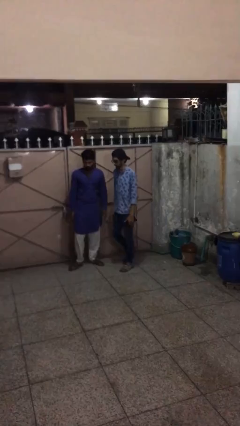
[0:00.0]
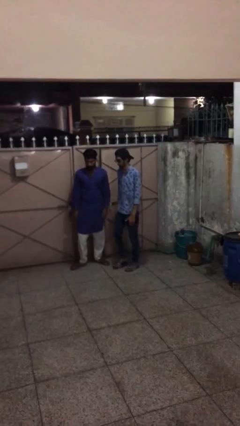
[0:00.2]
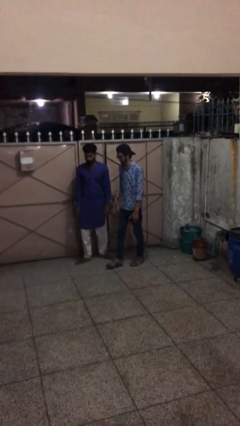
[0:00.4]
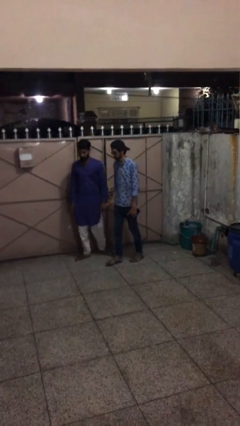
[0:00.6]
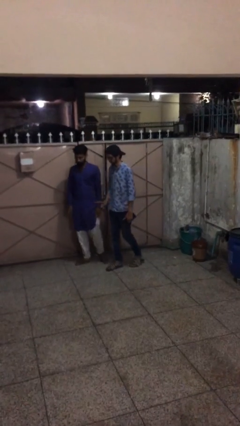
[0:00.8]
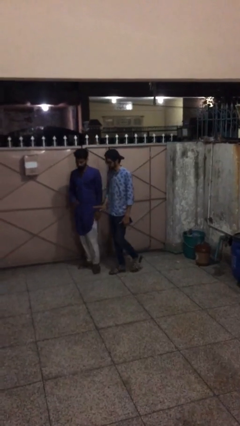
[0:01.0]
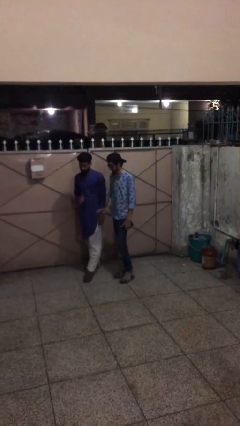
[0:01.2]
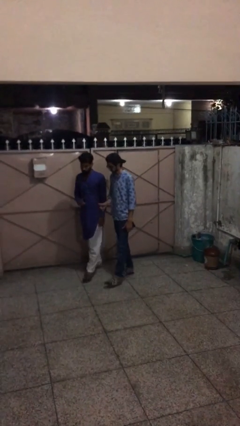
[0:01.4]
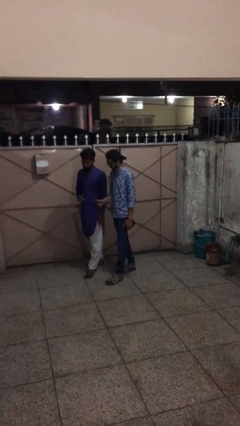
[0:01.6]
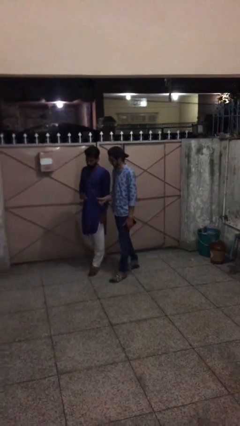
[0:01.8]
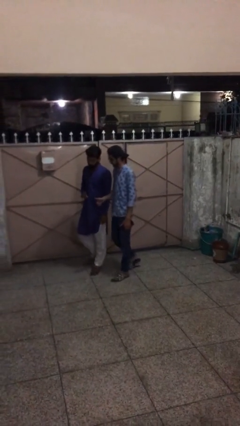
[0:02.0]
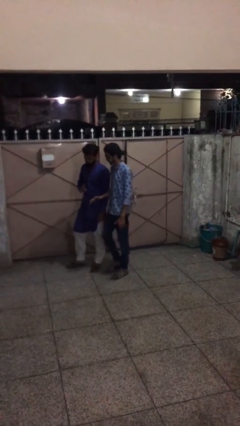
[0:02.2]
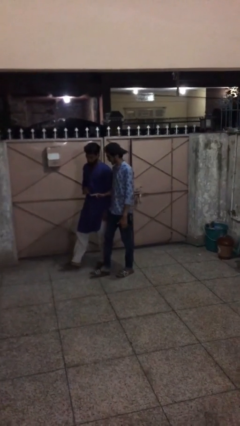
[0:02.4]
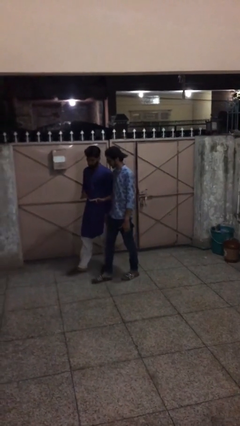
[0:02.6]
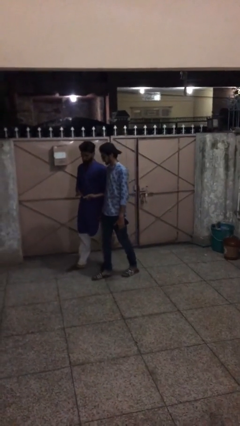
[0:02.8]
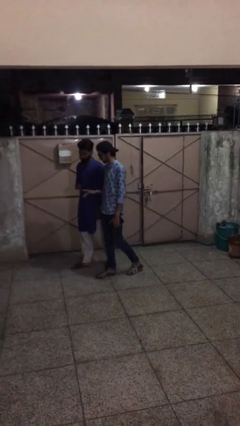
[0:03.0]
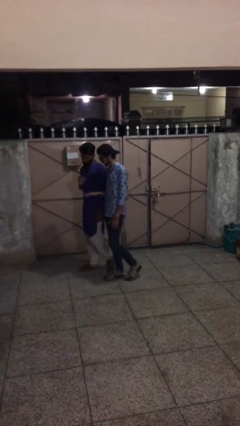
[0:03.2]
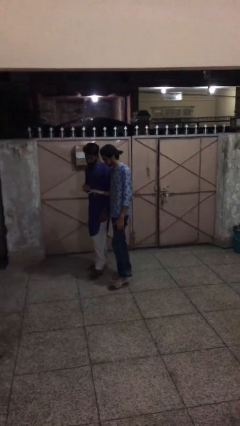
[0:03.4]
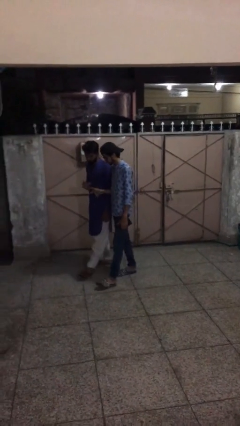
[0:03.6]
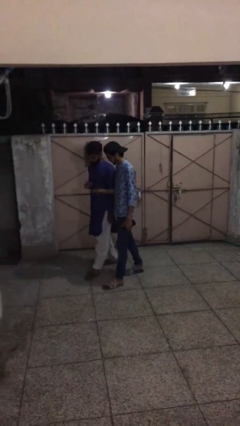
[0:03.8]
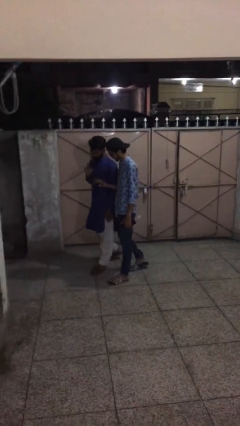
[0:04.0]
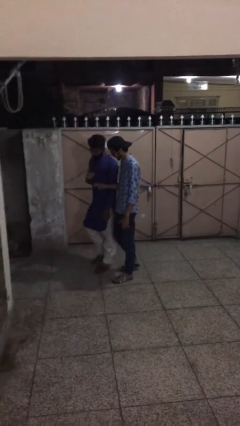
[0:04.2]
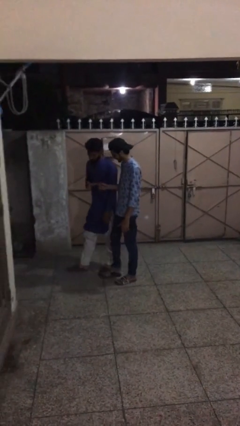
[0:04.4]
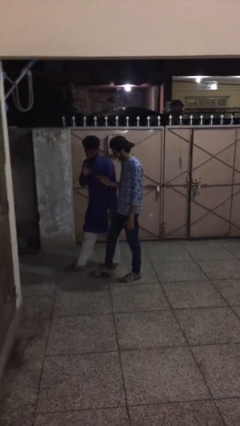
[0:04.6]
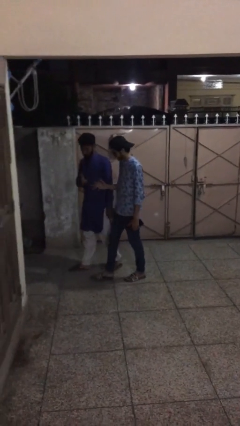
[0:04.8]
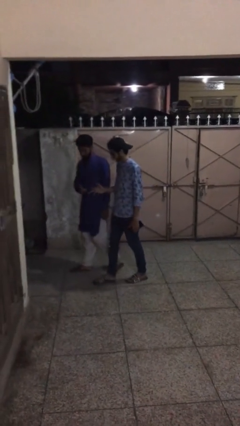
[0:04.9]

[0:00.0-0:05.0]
person talks to person

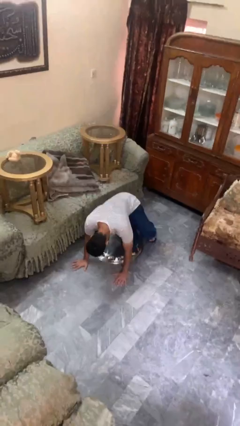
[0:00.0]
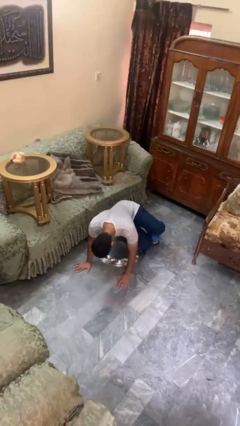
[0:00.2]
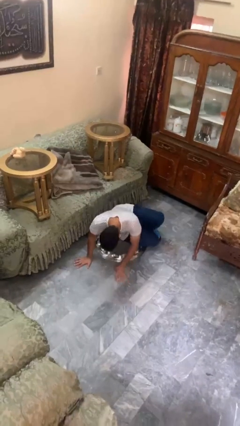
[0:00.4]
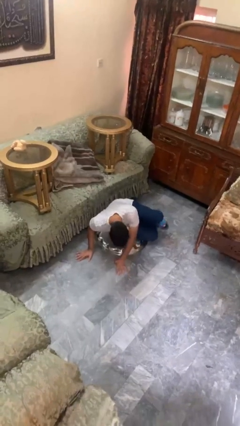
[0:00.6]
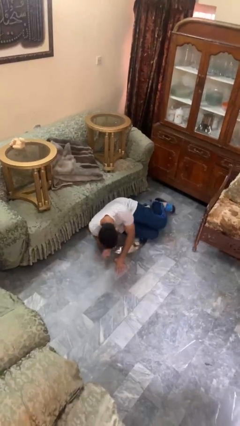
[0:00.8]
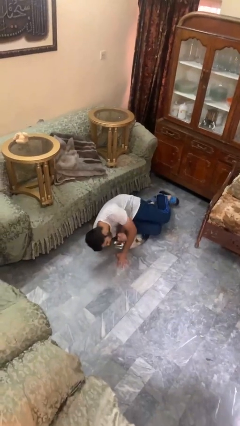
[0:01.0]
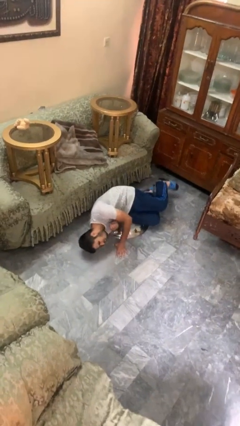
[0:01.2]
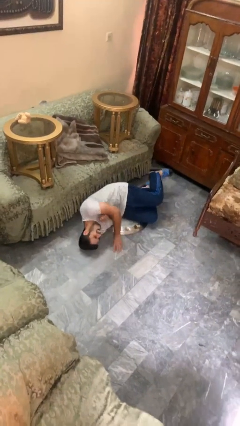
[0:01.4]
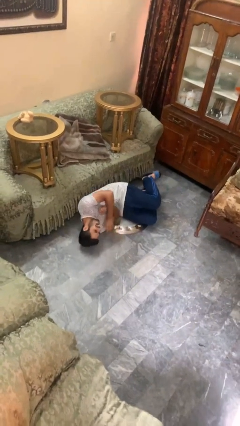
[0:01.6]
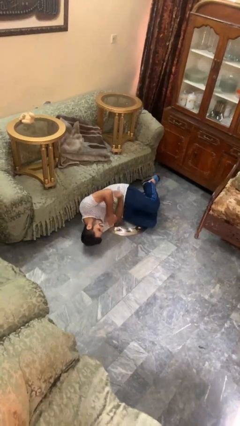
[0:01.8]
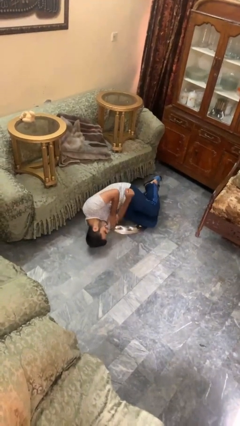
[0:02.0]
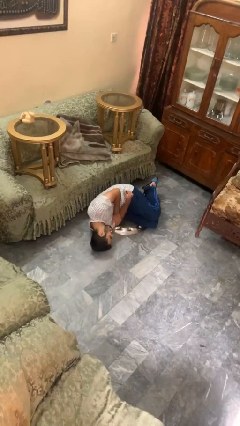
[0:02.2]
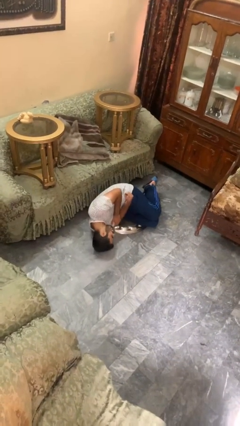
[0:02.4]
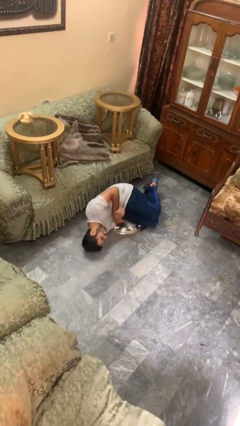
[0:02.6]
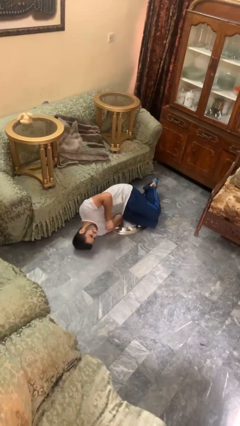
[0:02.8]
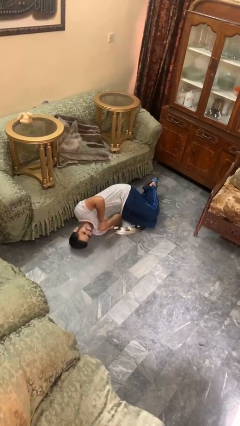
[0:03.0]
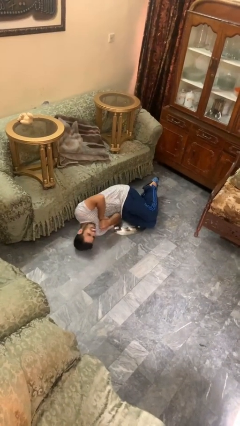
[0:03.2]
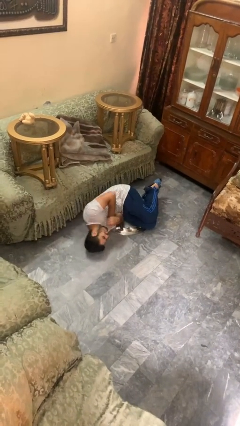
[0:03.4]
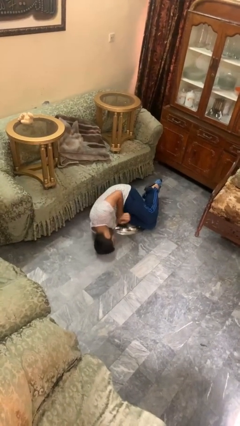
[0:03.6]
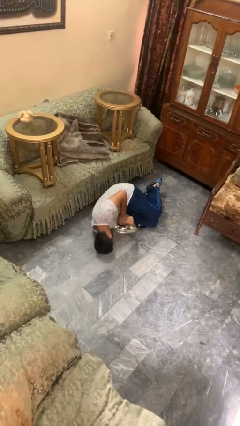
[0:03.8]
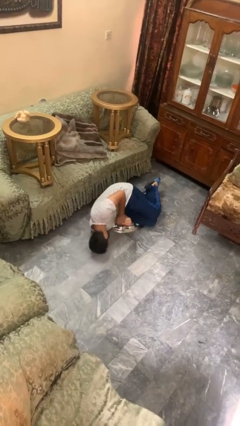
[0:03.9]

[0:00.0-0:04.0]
person lies down on floor

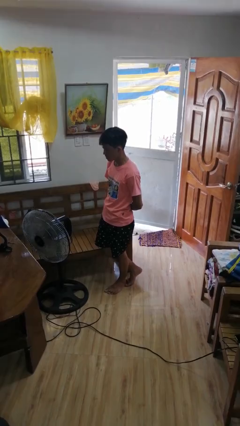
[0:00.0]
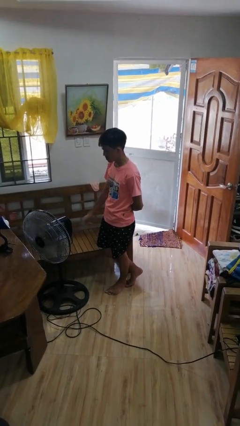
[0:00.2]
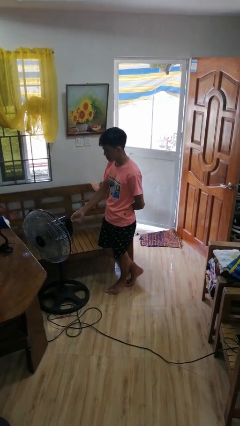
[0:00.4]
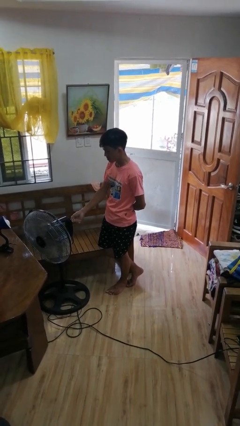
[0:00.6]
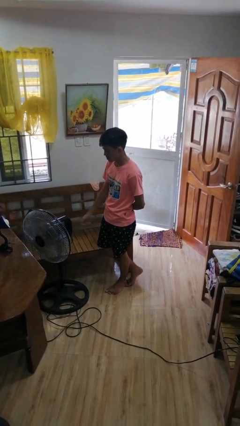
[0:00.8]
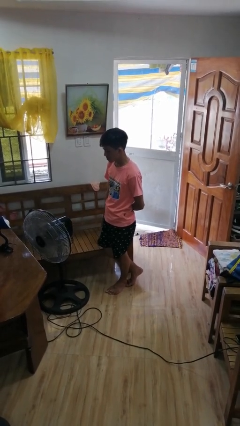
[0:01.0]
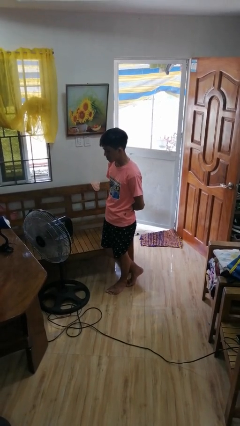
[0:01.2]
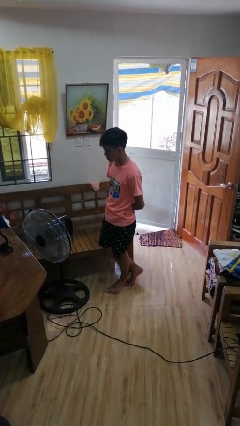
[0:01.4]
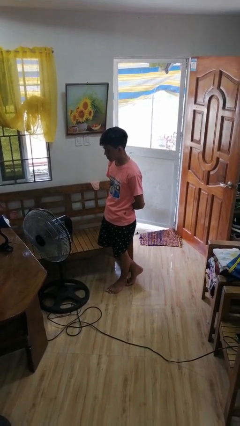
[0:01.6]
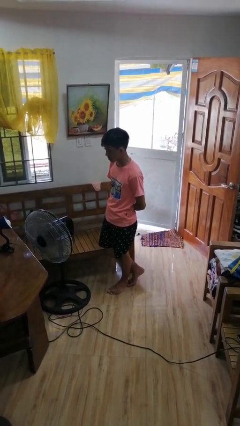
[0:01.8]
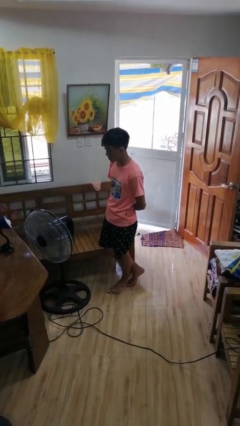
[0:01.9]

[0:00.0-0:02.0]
person turns on fan

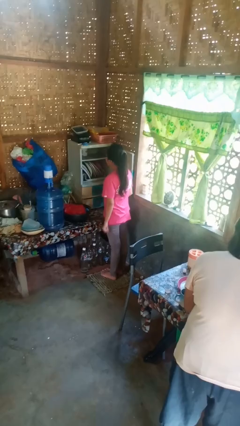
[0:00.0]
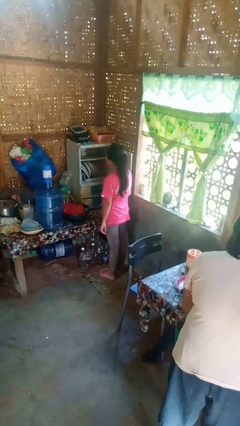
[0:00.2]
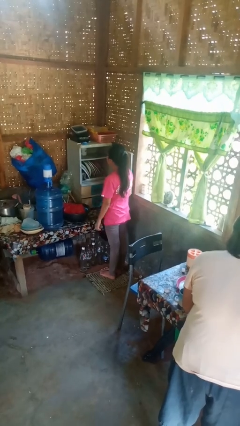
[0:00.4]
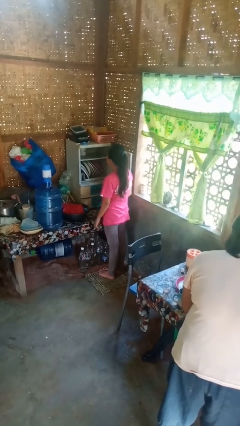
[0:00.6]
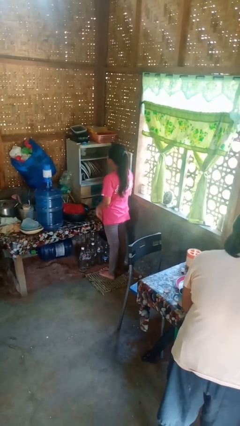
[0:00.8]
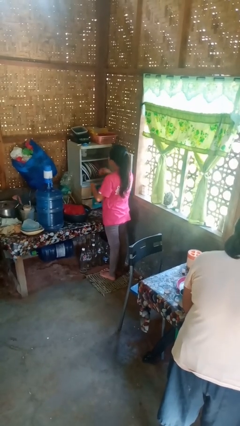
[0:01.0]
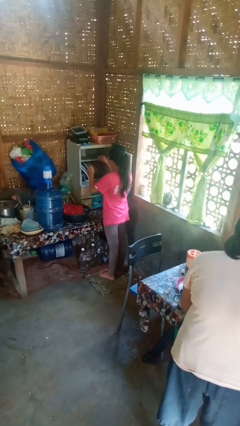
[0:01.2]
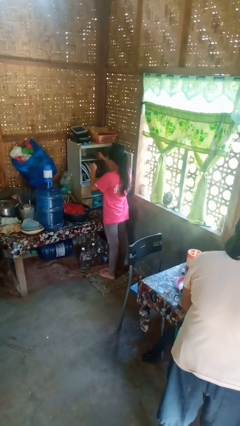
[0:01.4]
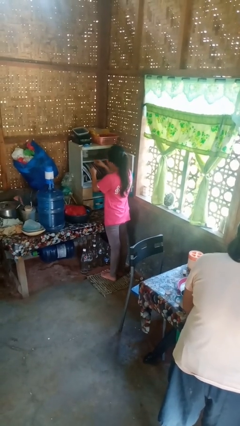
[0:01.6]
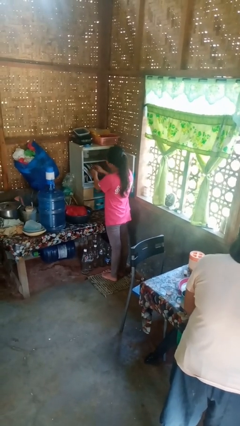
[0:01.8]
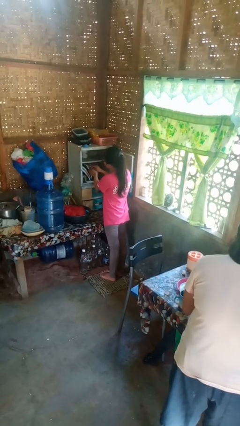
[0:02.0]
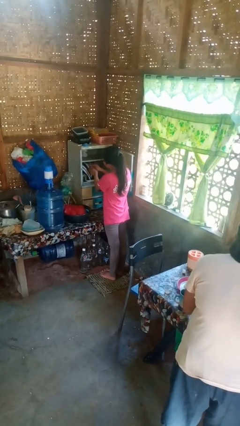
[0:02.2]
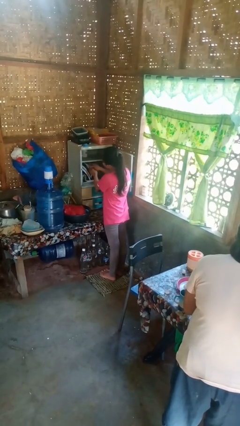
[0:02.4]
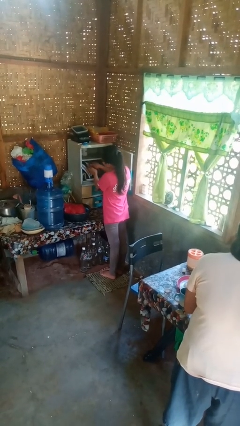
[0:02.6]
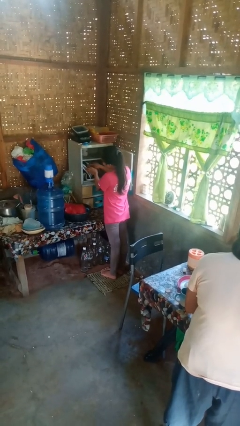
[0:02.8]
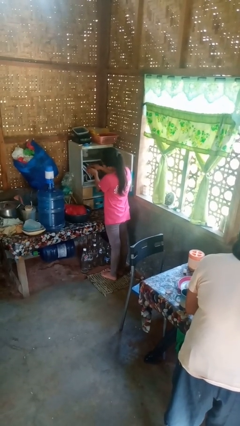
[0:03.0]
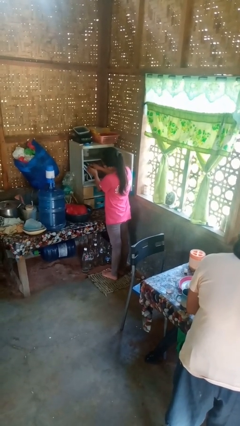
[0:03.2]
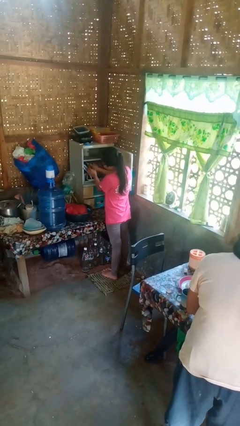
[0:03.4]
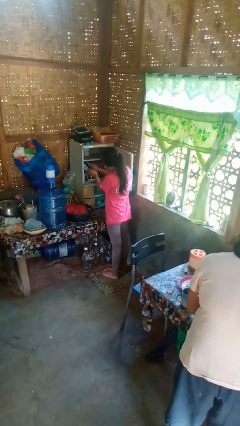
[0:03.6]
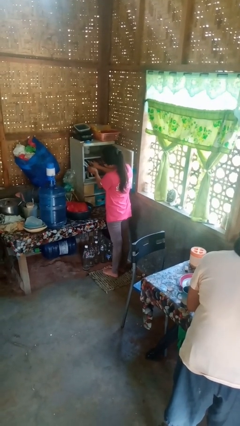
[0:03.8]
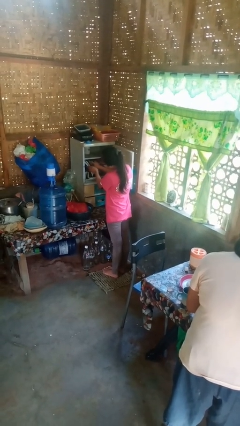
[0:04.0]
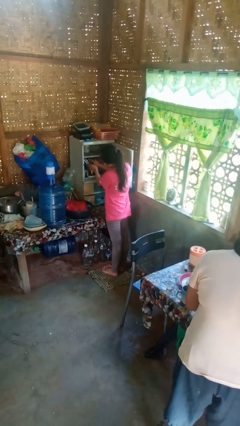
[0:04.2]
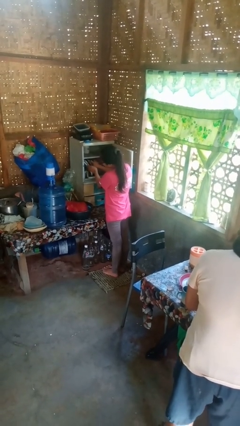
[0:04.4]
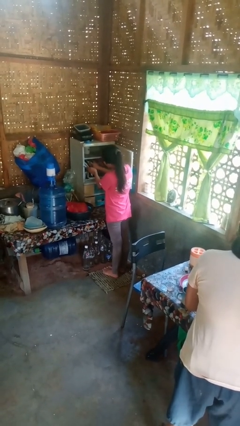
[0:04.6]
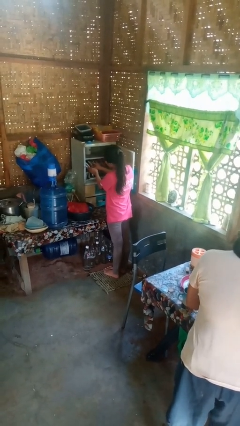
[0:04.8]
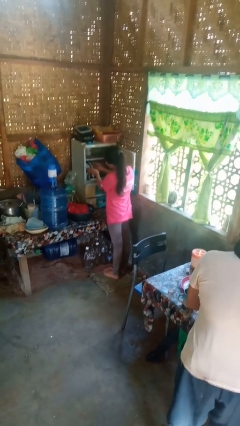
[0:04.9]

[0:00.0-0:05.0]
person searches in cabinet

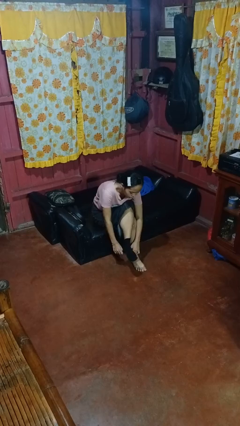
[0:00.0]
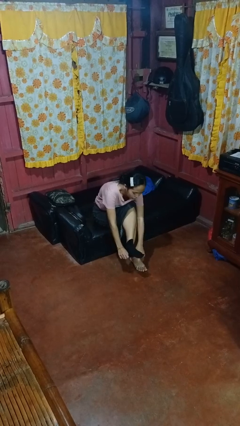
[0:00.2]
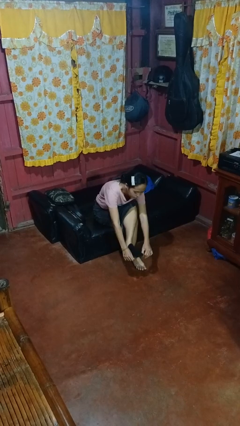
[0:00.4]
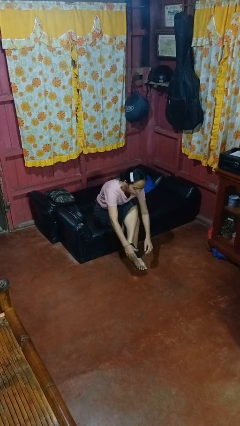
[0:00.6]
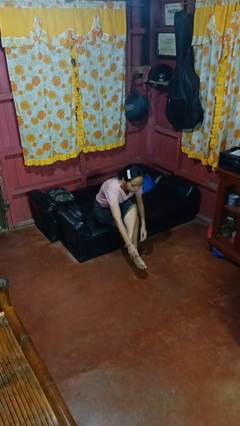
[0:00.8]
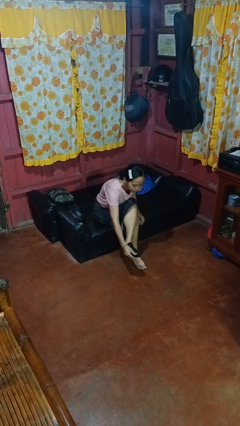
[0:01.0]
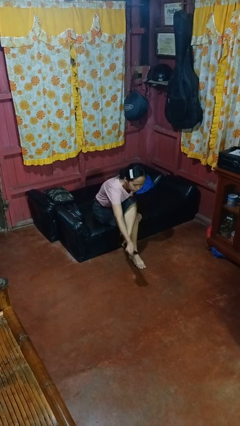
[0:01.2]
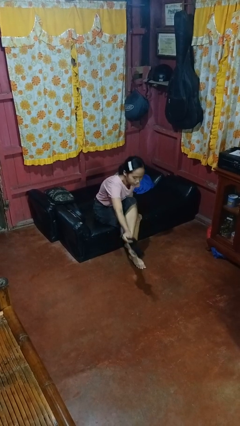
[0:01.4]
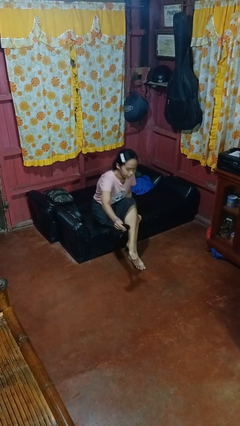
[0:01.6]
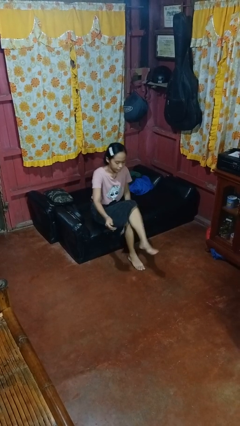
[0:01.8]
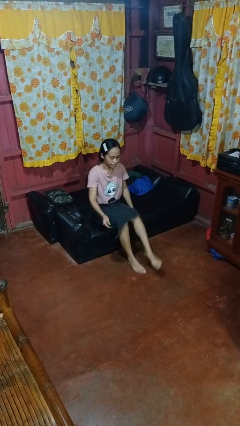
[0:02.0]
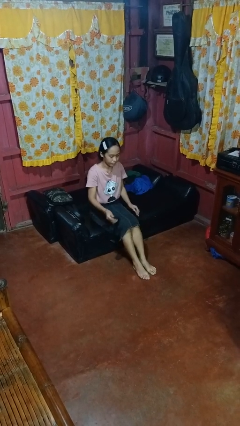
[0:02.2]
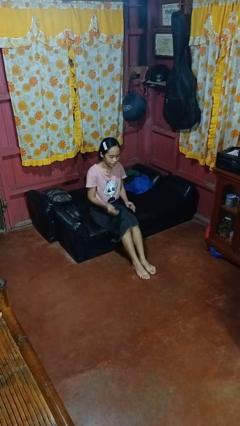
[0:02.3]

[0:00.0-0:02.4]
person takes off socks
